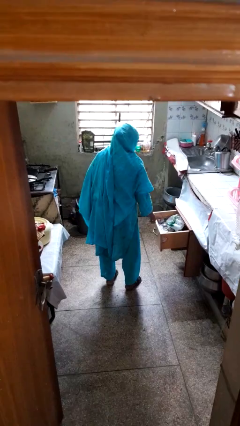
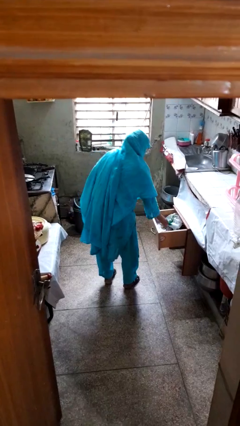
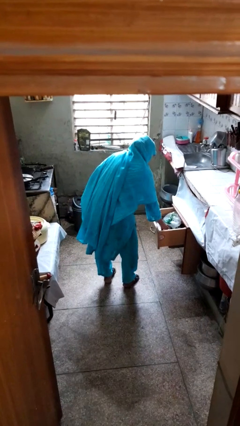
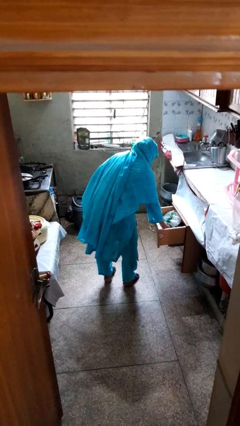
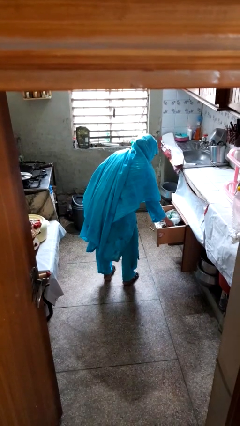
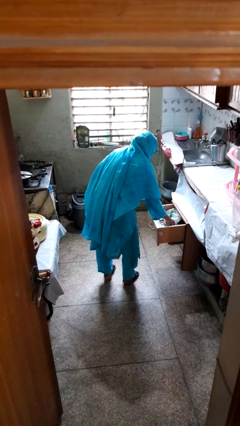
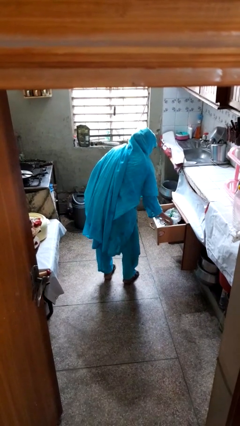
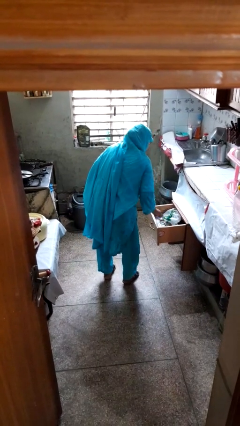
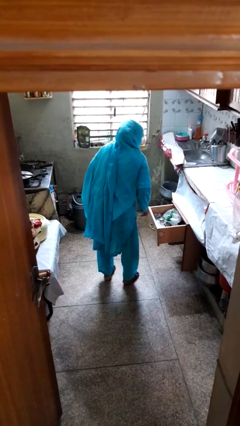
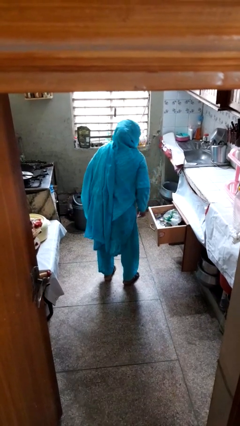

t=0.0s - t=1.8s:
person searches in kitchen drawer

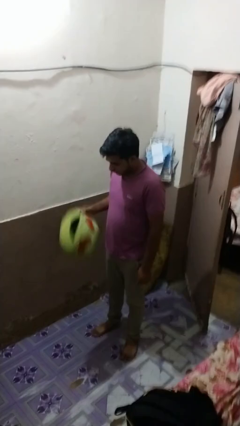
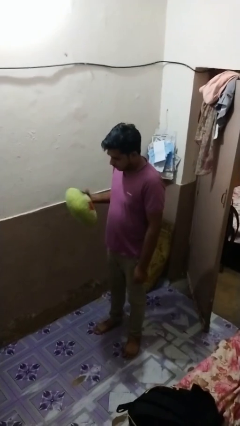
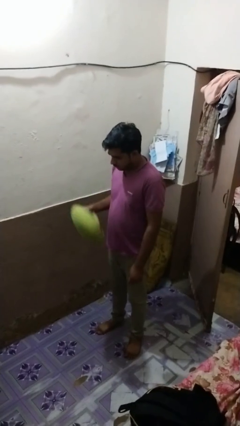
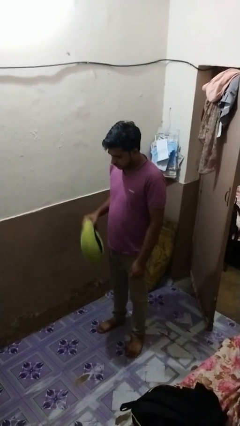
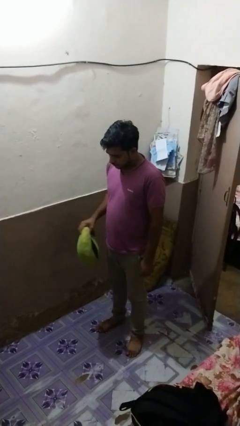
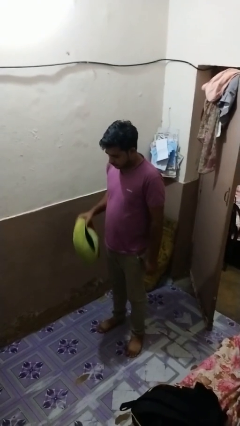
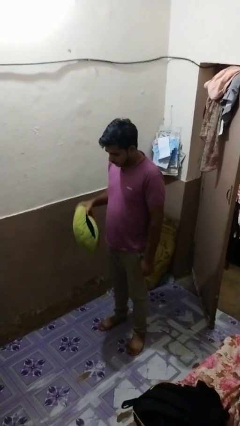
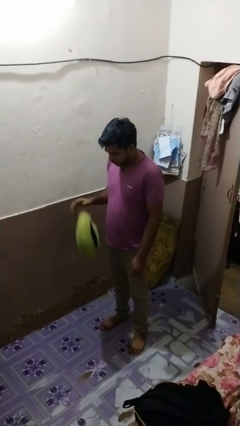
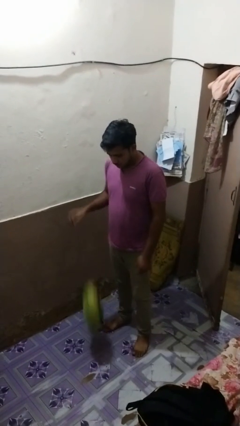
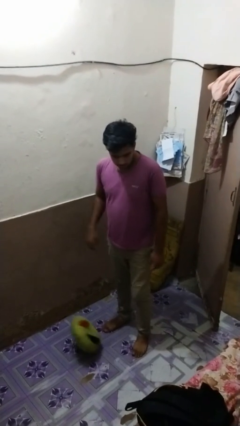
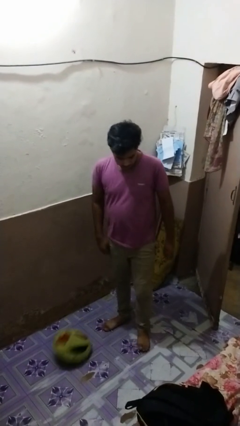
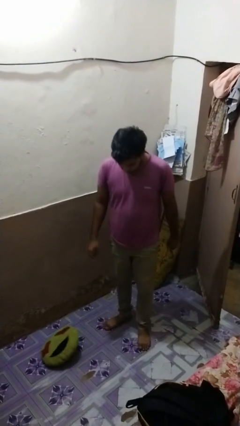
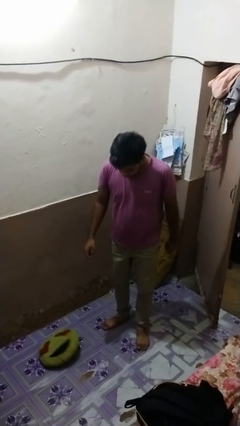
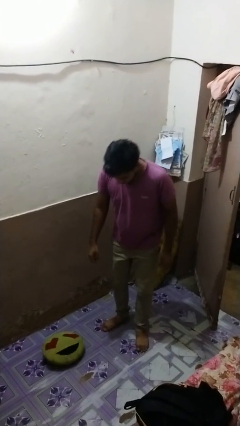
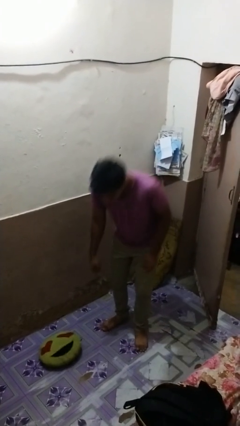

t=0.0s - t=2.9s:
person drops object

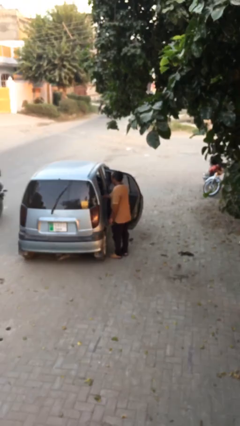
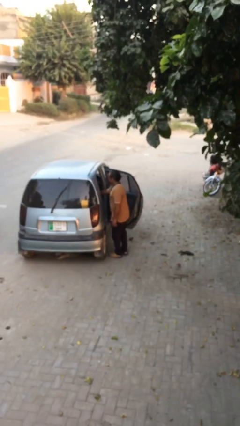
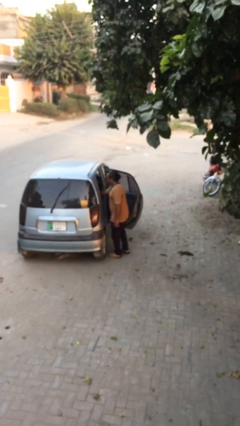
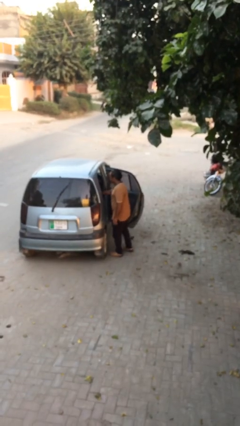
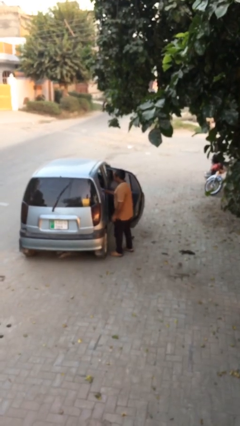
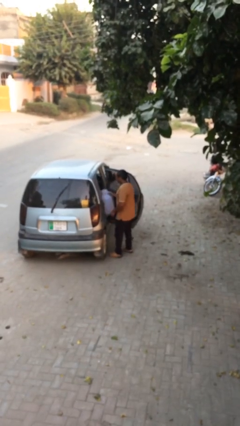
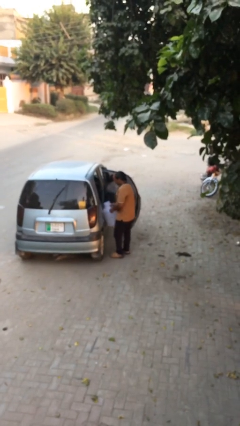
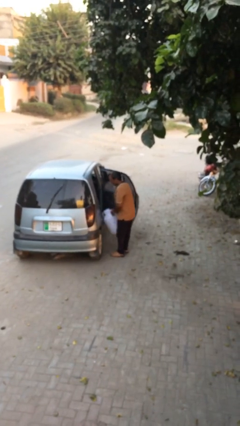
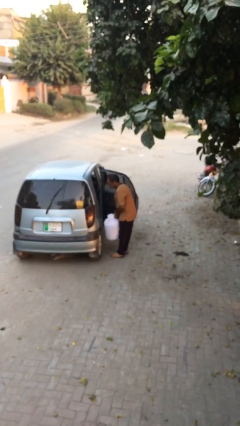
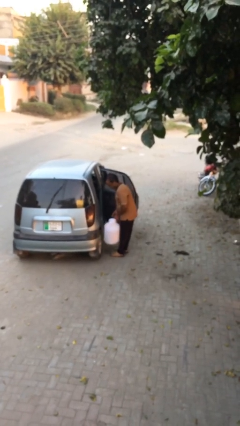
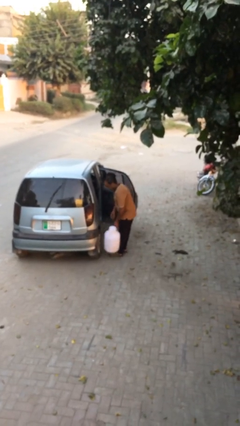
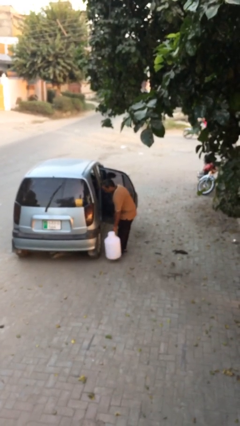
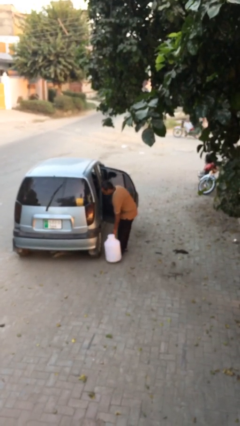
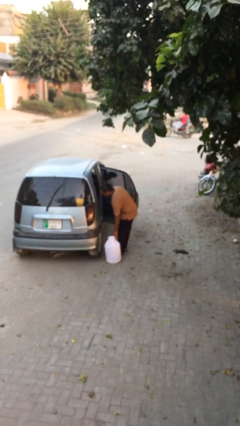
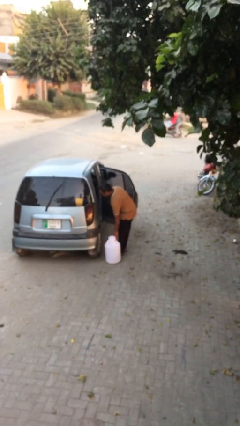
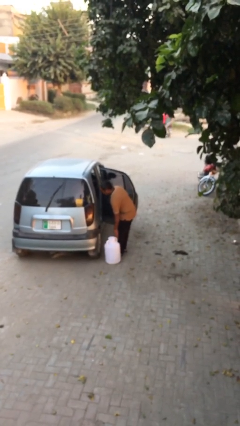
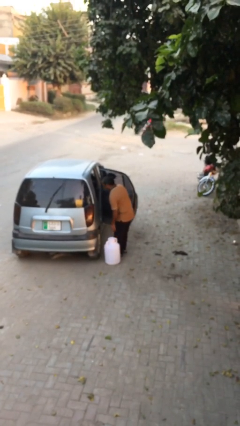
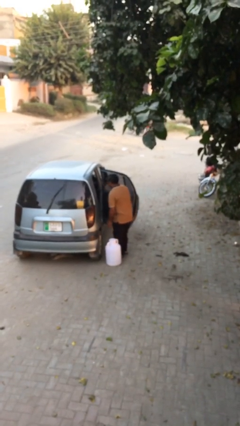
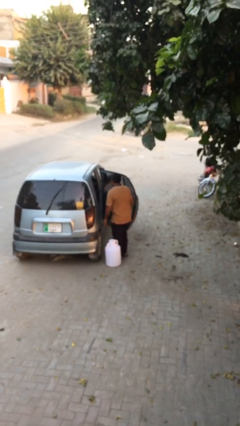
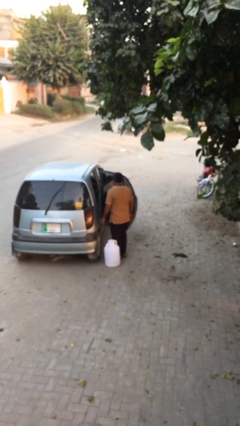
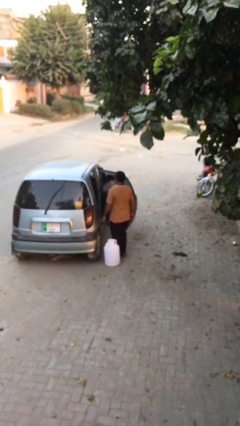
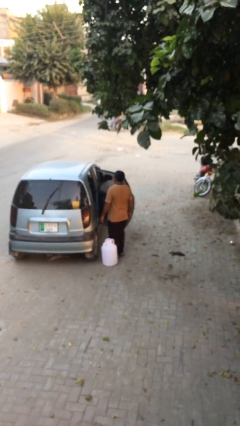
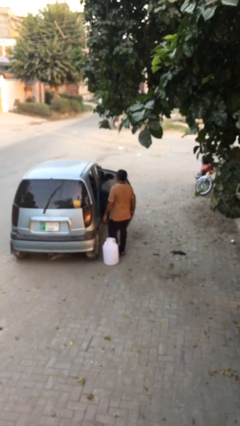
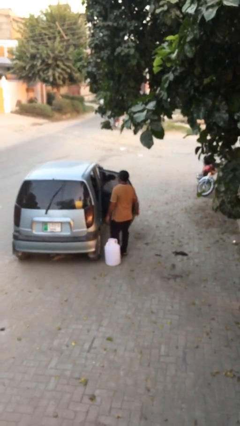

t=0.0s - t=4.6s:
person unloads car

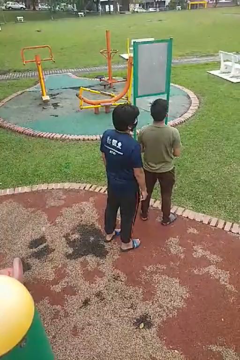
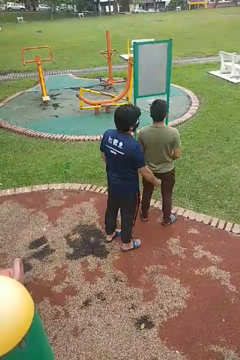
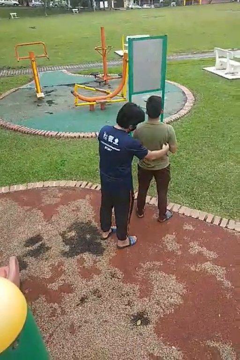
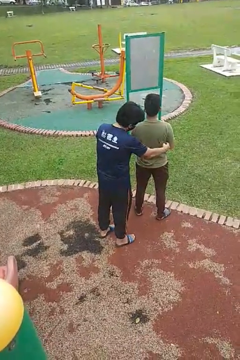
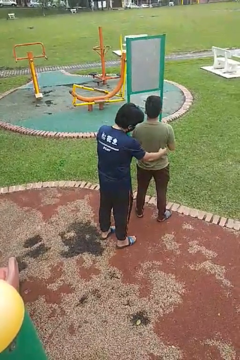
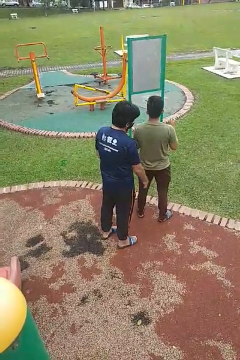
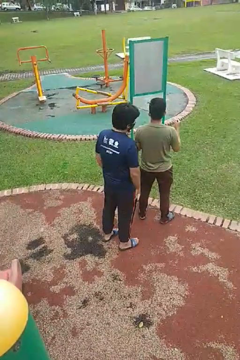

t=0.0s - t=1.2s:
person tickles person

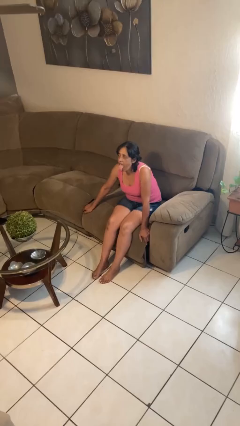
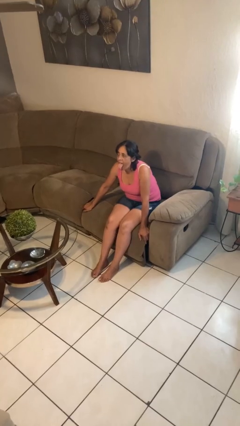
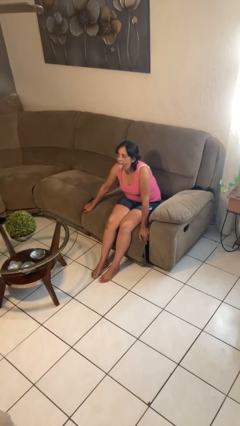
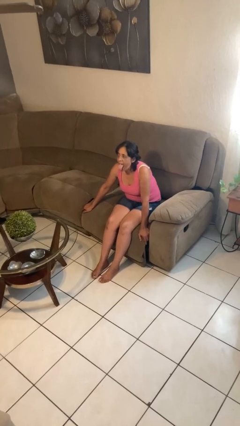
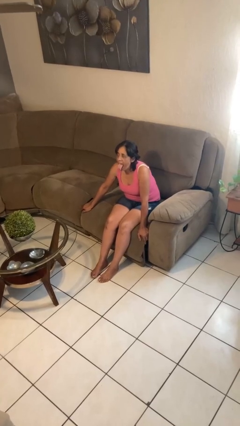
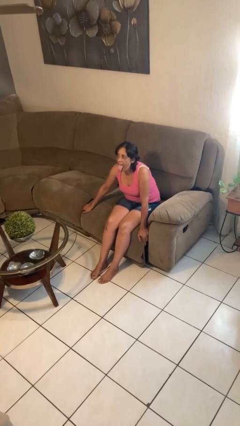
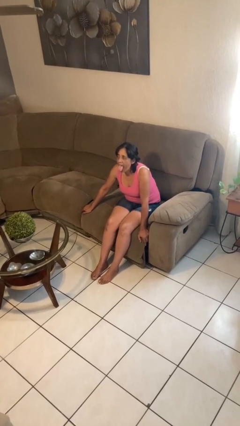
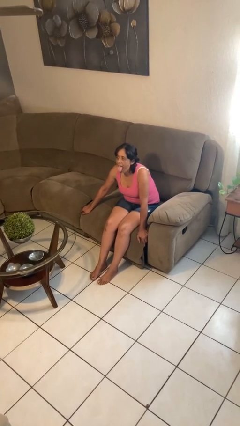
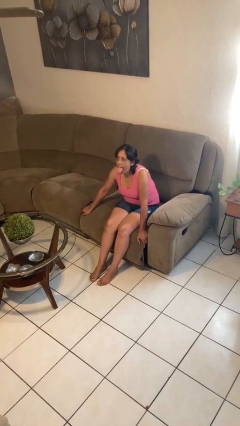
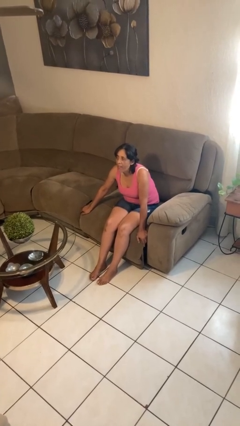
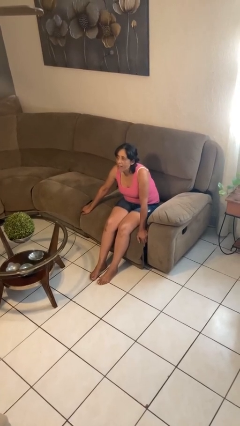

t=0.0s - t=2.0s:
person sticks out tongue

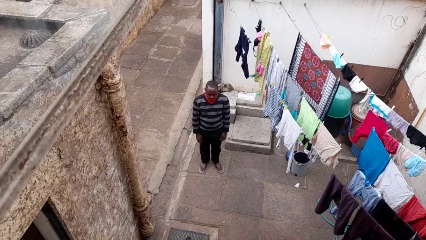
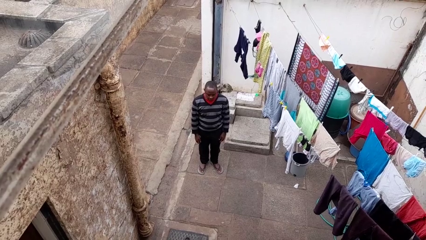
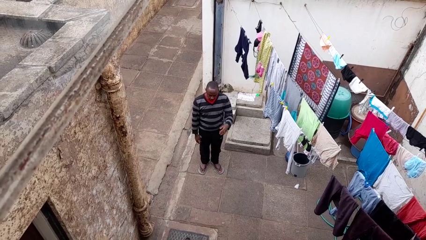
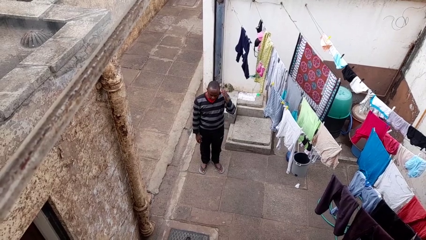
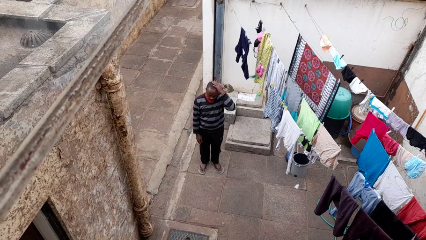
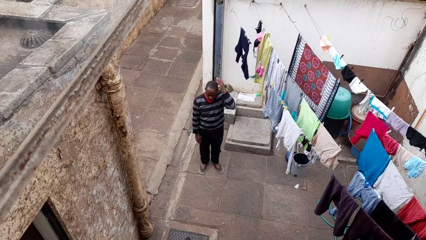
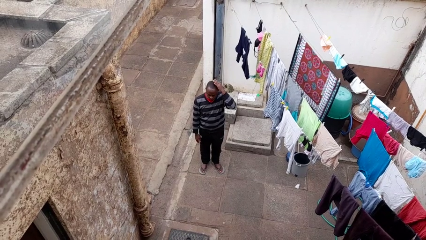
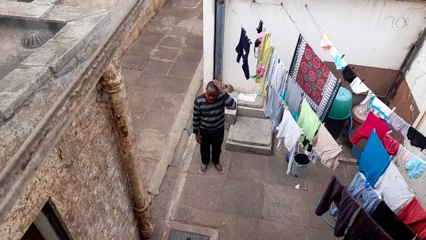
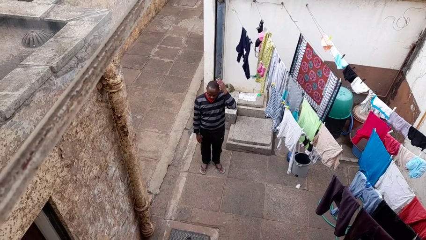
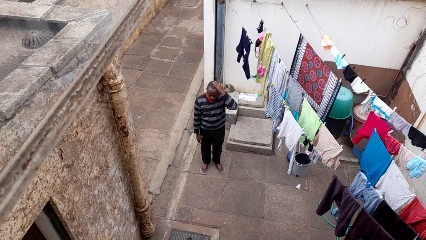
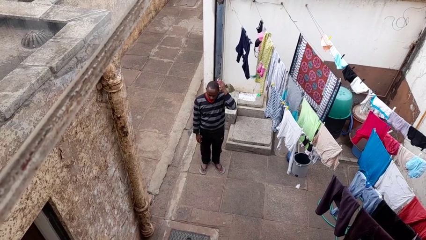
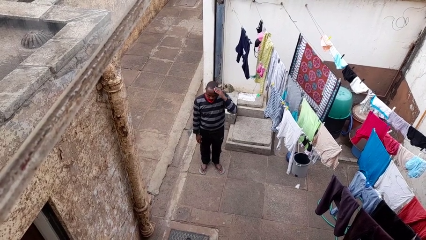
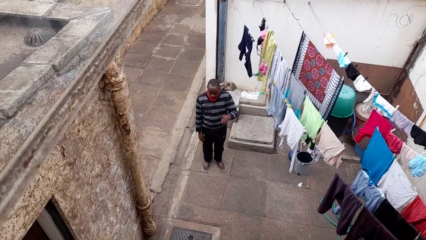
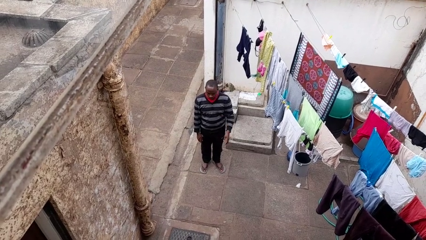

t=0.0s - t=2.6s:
person pats head

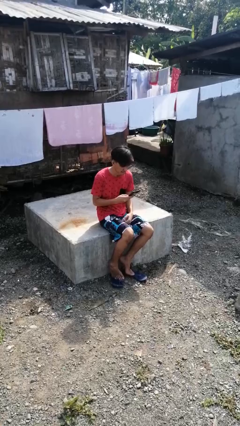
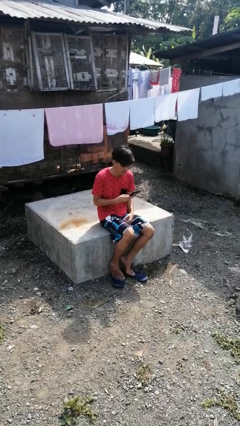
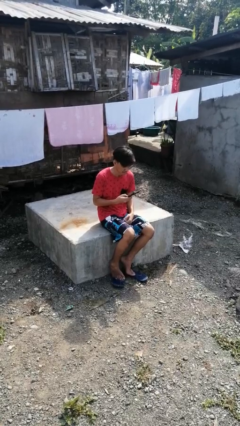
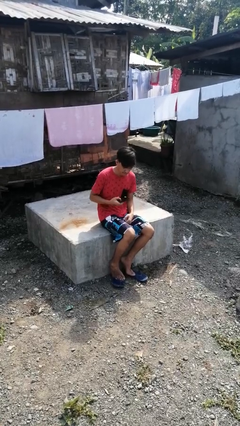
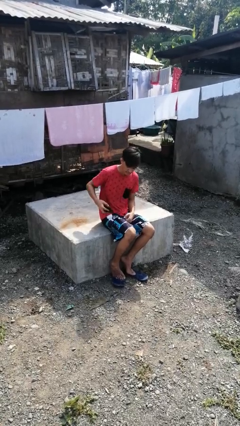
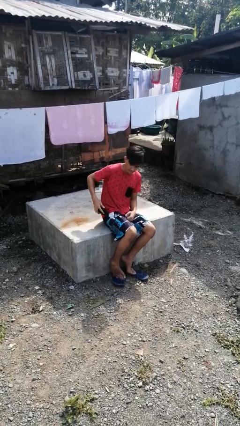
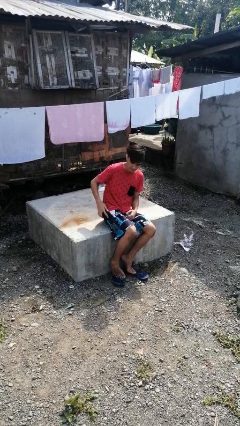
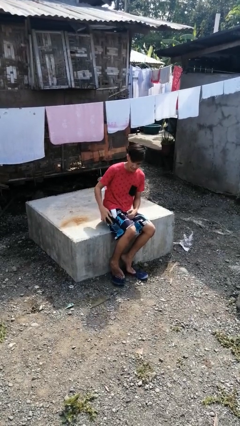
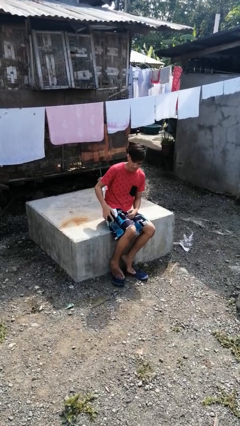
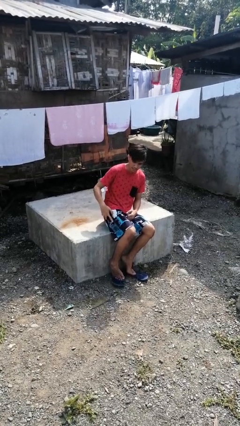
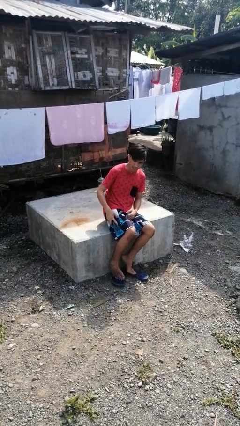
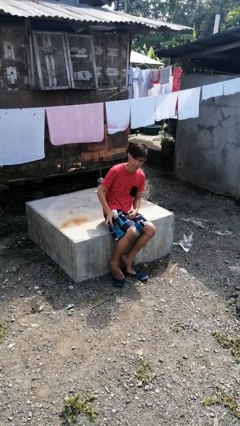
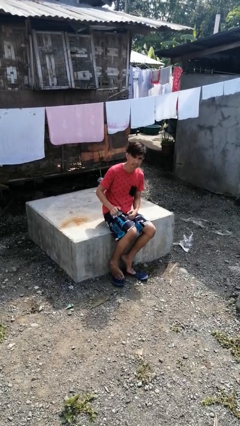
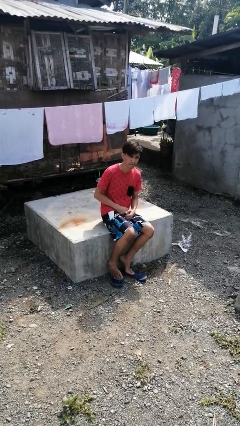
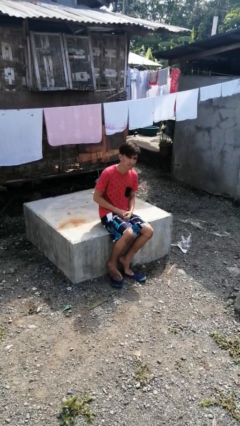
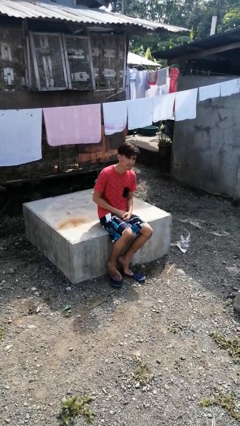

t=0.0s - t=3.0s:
person puts phone into pocket
